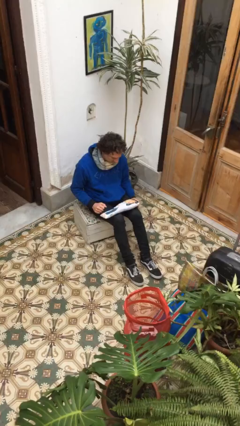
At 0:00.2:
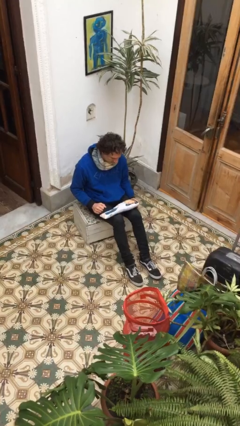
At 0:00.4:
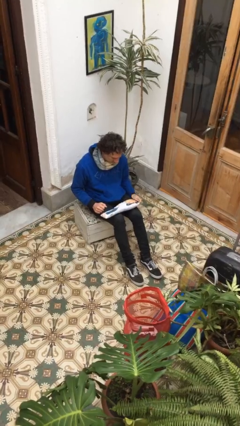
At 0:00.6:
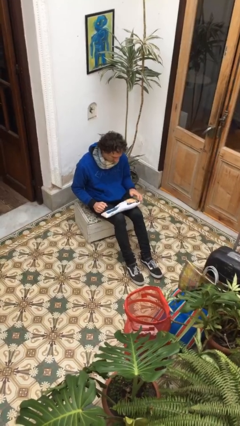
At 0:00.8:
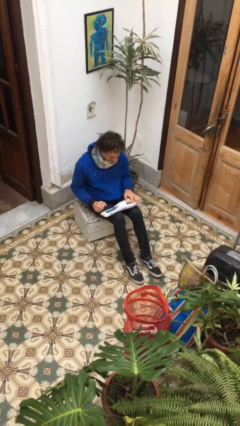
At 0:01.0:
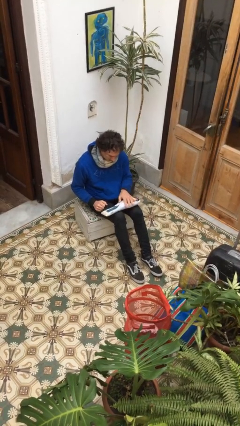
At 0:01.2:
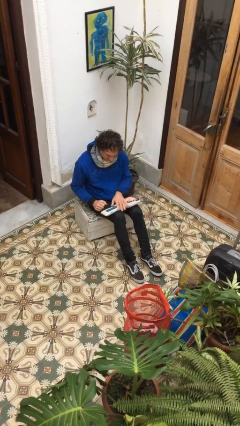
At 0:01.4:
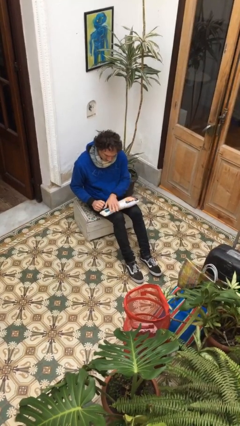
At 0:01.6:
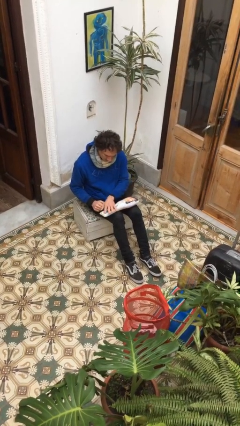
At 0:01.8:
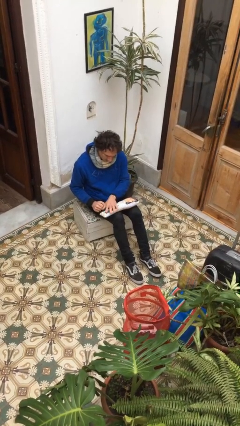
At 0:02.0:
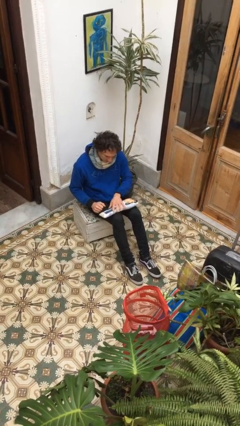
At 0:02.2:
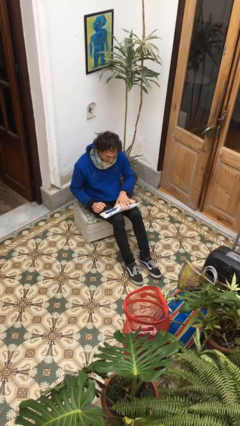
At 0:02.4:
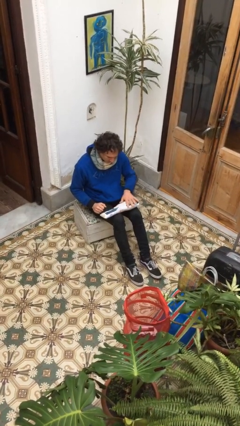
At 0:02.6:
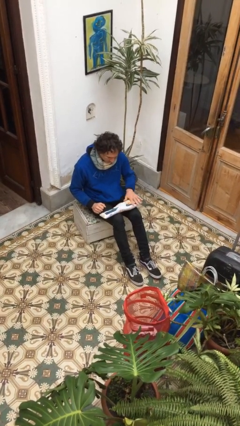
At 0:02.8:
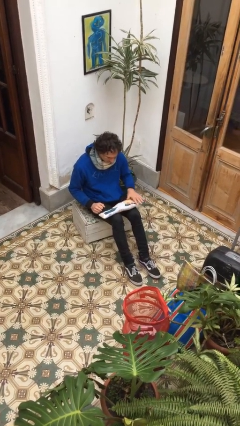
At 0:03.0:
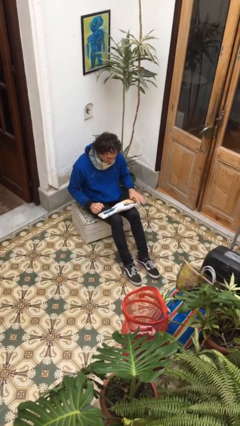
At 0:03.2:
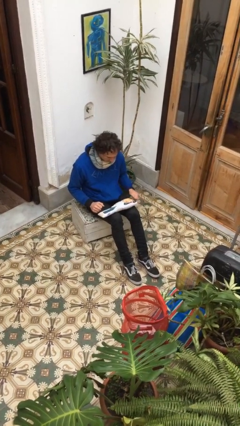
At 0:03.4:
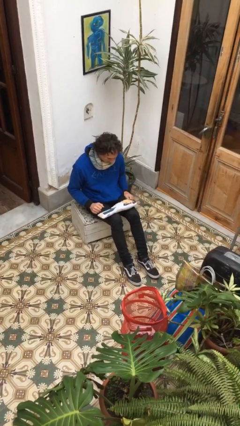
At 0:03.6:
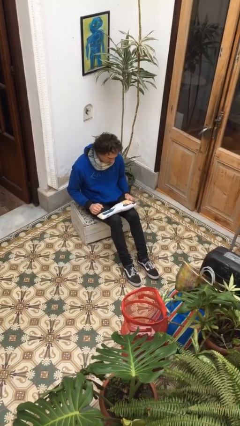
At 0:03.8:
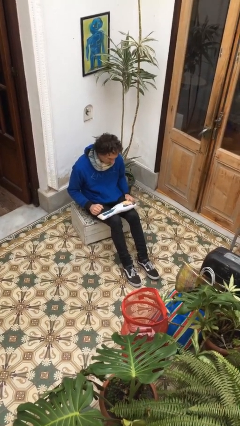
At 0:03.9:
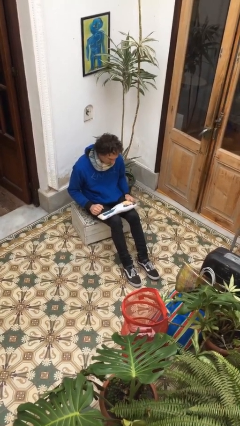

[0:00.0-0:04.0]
person waves hand over object

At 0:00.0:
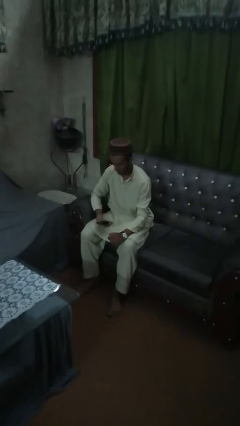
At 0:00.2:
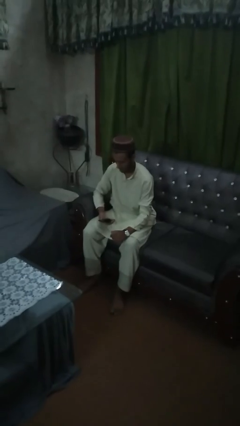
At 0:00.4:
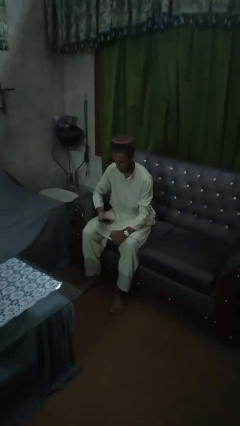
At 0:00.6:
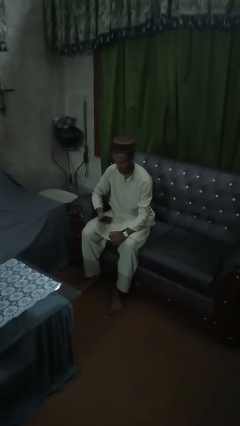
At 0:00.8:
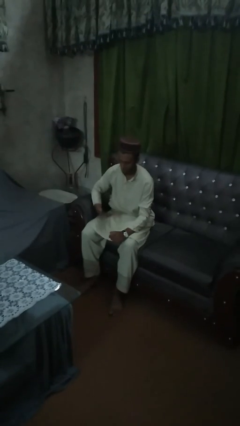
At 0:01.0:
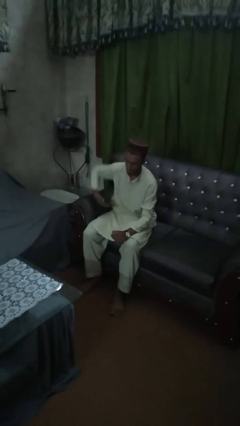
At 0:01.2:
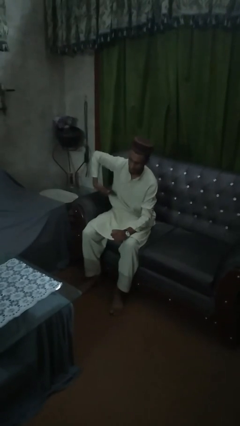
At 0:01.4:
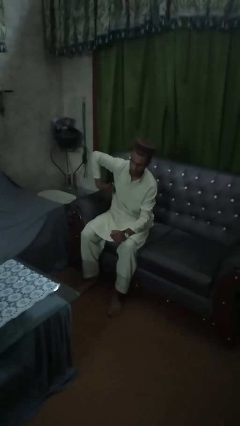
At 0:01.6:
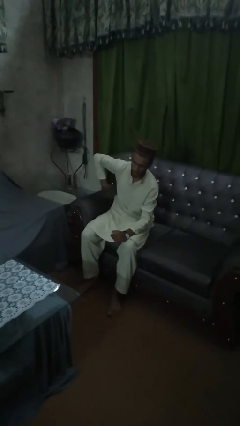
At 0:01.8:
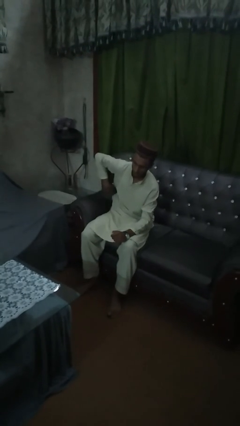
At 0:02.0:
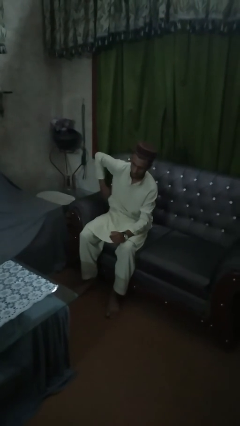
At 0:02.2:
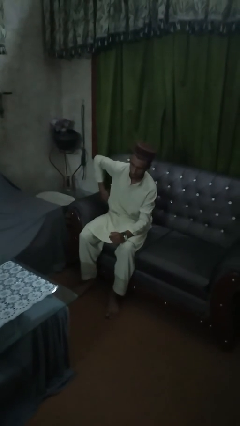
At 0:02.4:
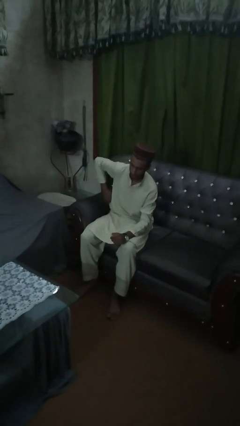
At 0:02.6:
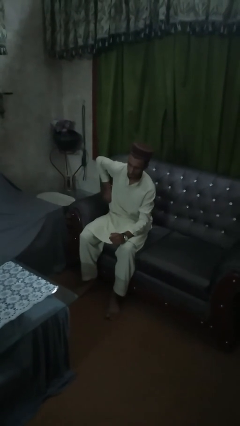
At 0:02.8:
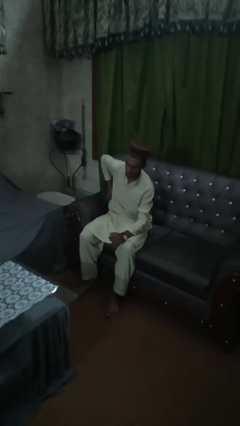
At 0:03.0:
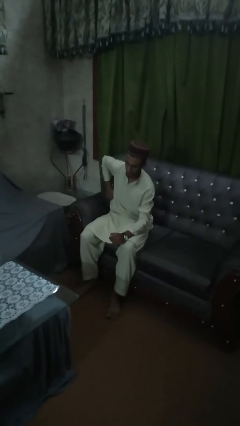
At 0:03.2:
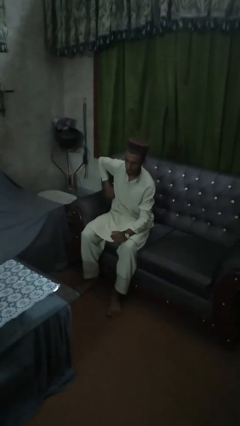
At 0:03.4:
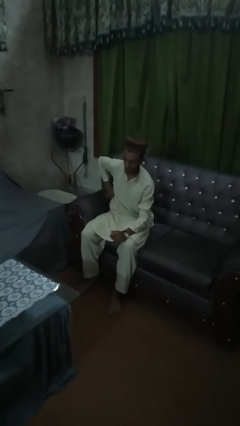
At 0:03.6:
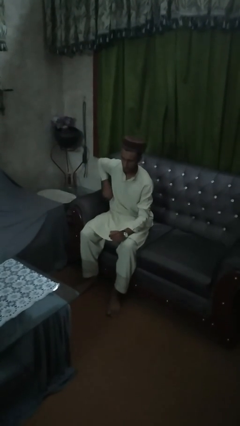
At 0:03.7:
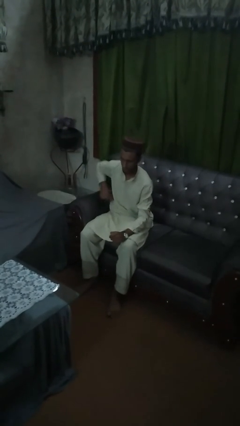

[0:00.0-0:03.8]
person puts phone into pocket

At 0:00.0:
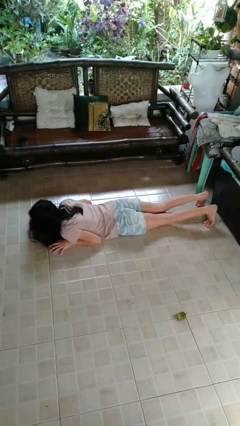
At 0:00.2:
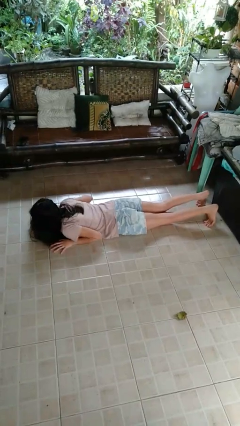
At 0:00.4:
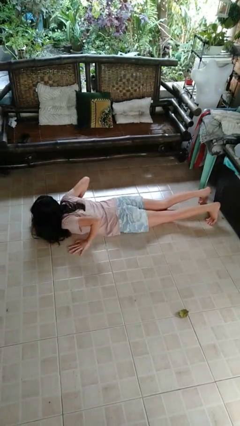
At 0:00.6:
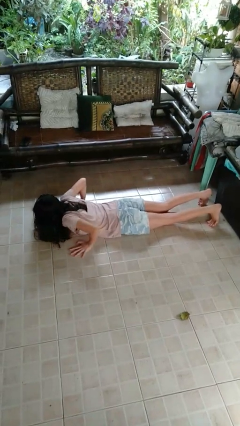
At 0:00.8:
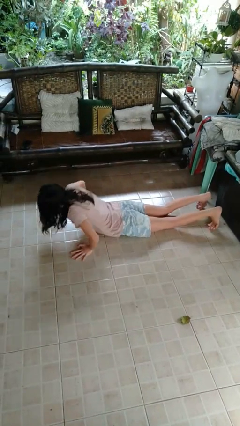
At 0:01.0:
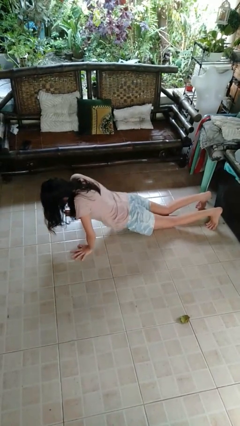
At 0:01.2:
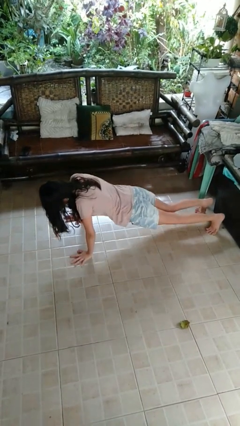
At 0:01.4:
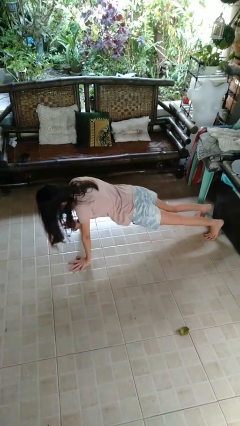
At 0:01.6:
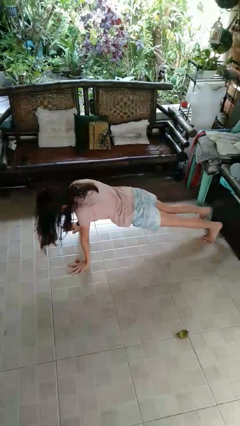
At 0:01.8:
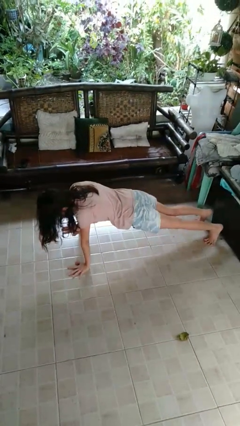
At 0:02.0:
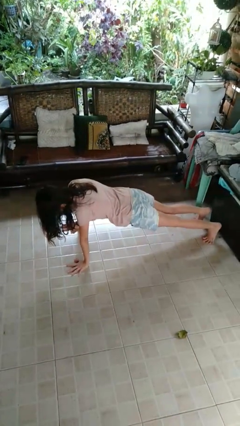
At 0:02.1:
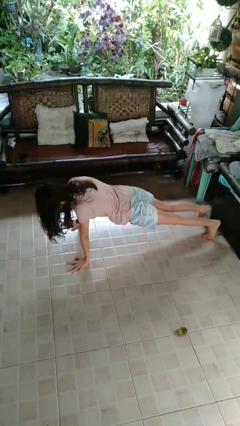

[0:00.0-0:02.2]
person exercises with pushup

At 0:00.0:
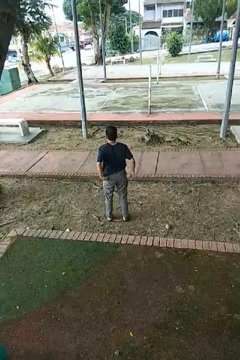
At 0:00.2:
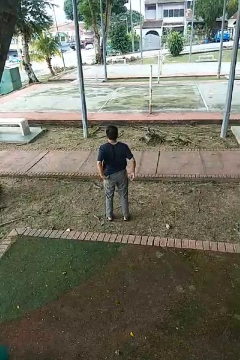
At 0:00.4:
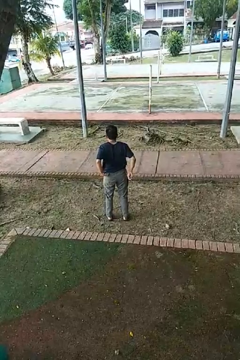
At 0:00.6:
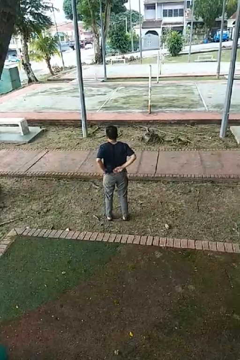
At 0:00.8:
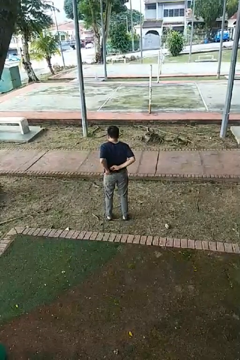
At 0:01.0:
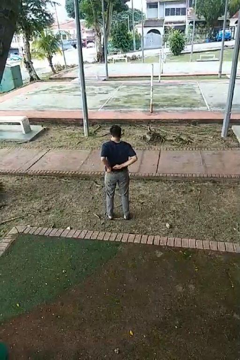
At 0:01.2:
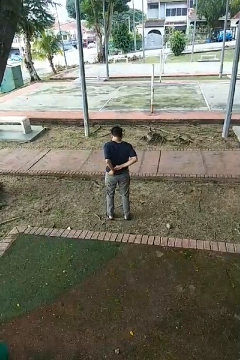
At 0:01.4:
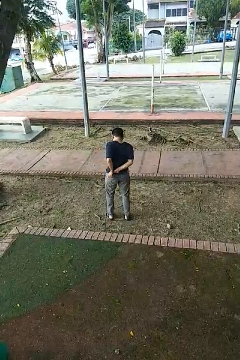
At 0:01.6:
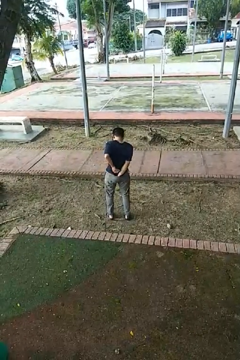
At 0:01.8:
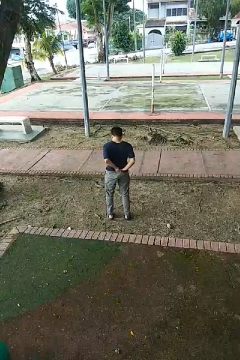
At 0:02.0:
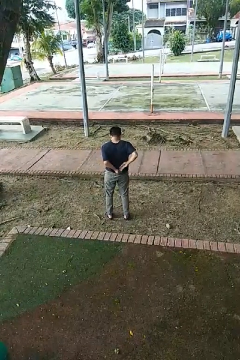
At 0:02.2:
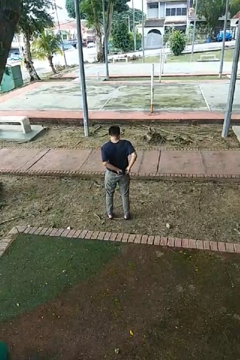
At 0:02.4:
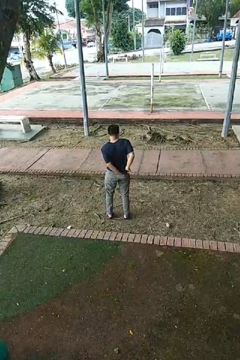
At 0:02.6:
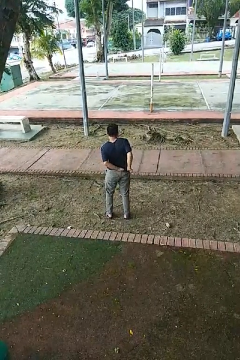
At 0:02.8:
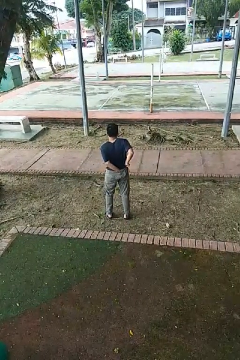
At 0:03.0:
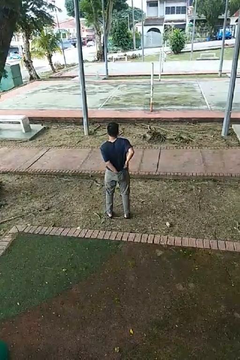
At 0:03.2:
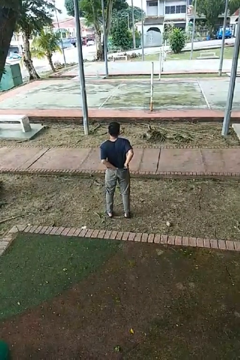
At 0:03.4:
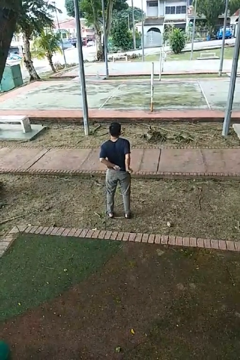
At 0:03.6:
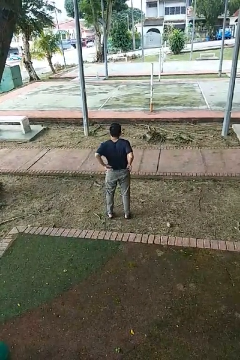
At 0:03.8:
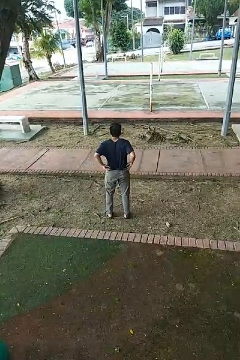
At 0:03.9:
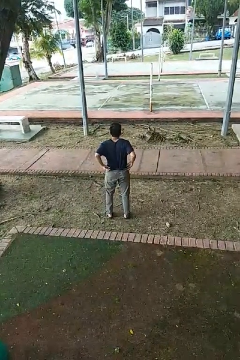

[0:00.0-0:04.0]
person tucks in shirt

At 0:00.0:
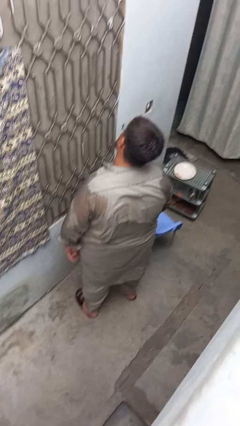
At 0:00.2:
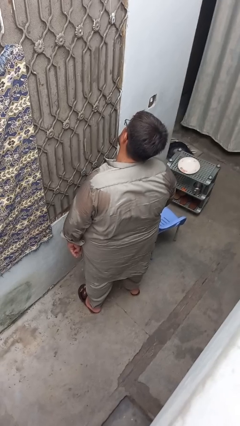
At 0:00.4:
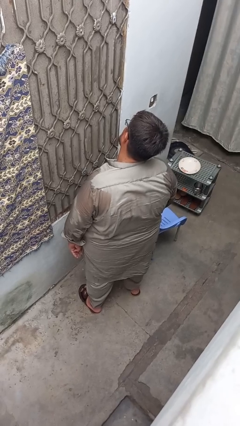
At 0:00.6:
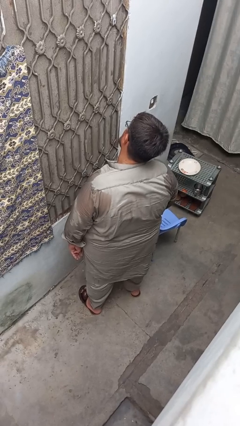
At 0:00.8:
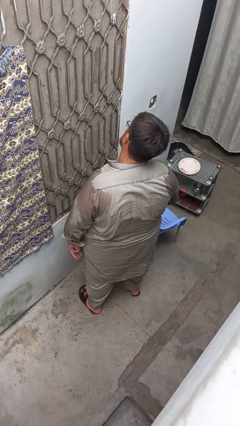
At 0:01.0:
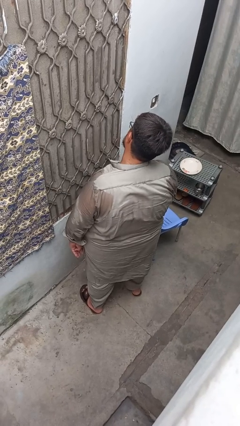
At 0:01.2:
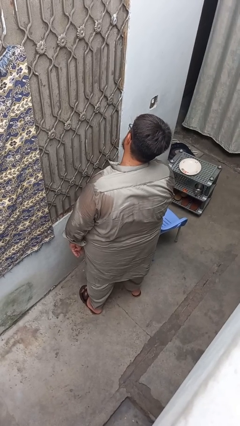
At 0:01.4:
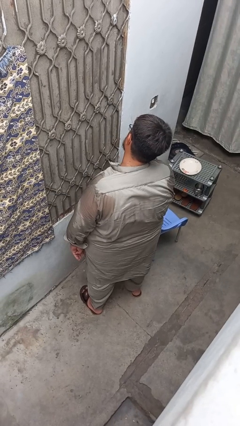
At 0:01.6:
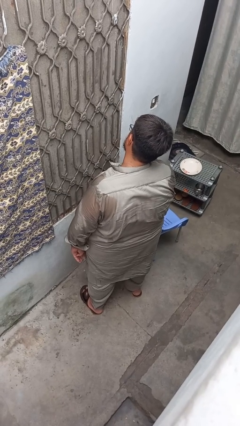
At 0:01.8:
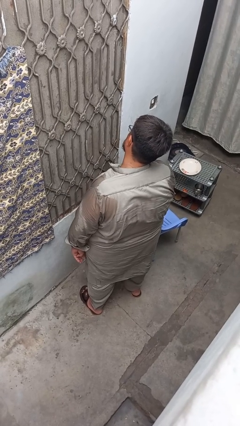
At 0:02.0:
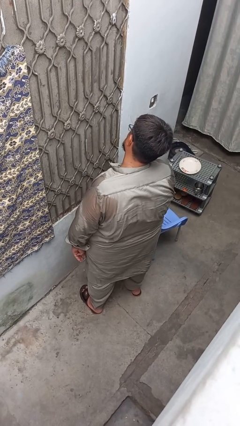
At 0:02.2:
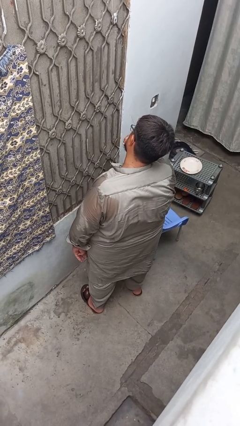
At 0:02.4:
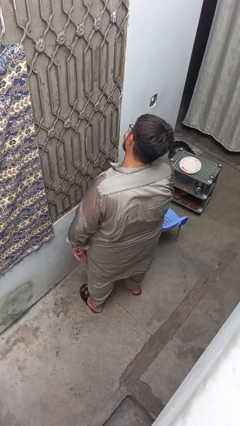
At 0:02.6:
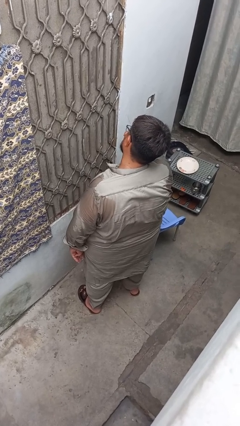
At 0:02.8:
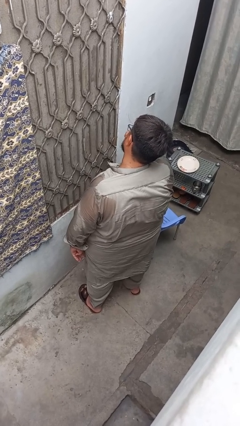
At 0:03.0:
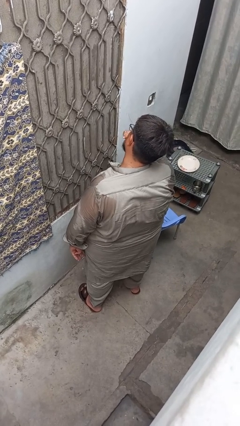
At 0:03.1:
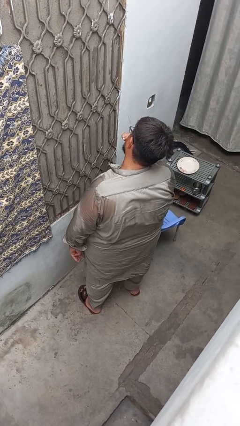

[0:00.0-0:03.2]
person brushes teeth

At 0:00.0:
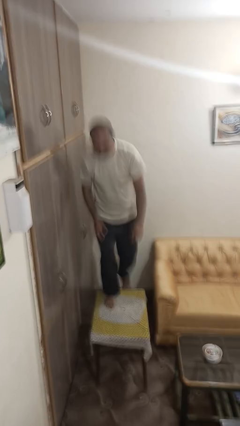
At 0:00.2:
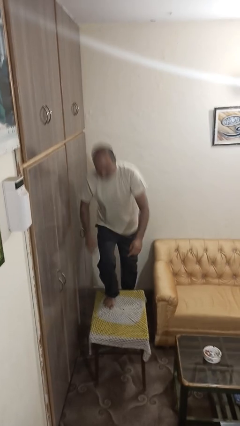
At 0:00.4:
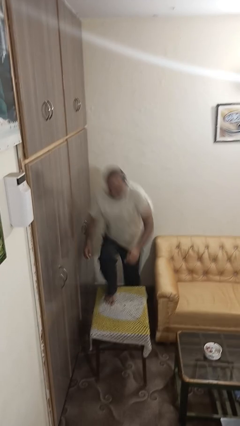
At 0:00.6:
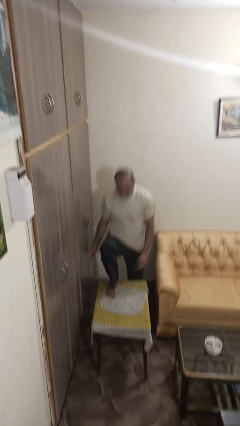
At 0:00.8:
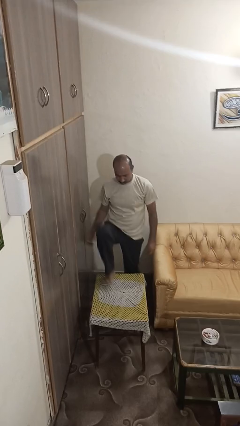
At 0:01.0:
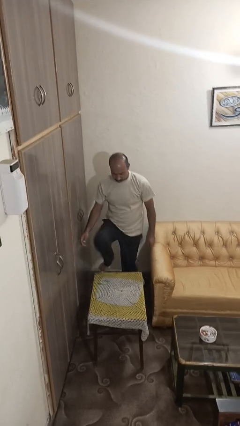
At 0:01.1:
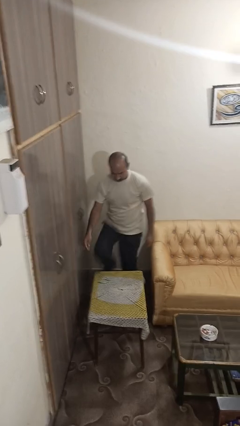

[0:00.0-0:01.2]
person climbs off table
